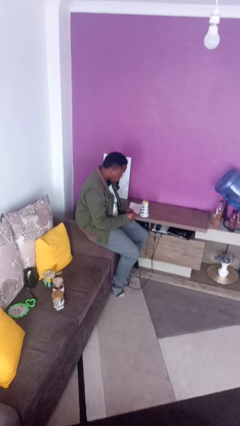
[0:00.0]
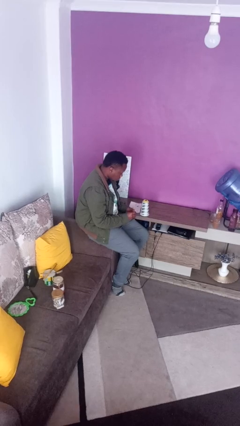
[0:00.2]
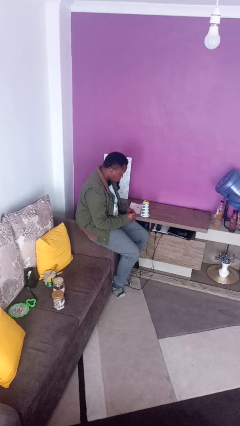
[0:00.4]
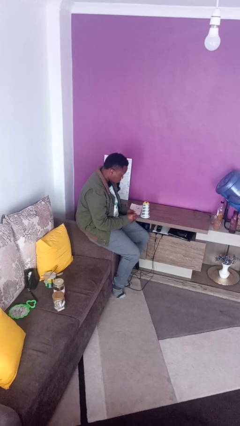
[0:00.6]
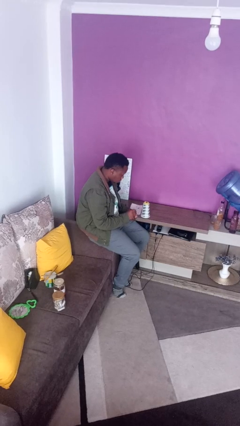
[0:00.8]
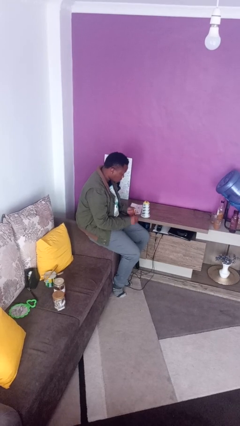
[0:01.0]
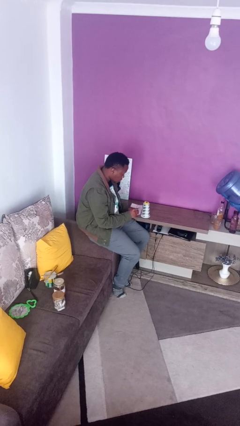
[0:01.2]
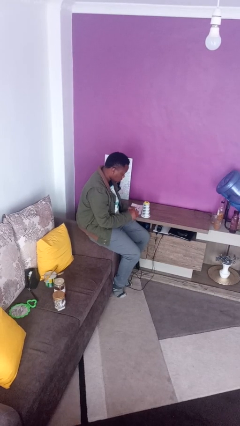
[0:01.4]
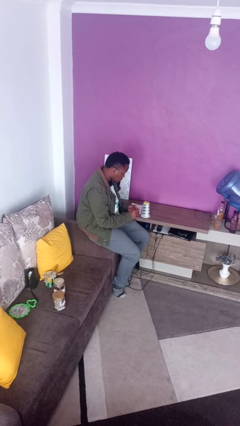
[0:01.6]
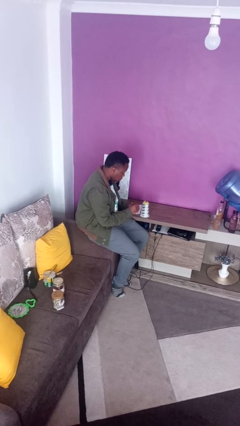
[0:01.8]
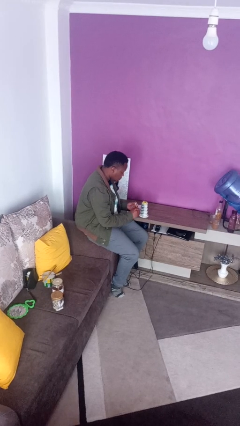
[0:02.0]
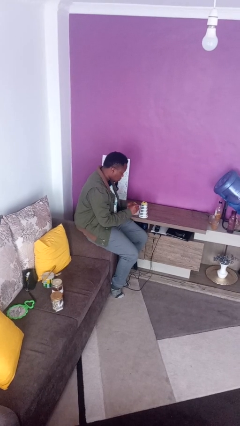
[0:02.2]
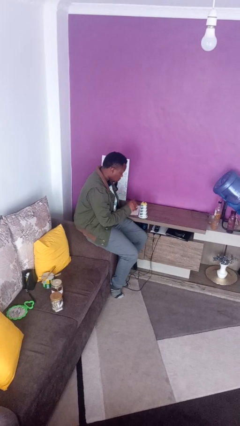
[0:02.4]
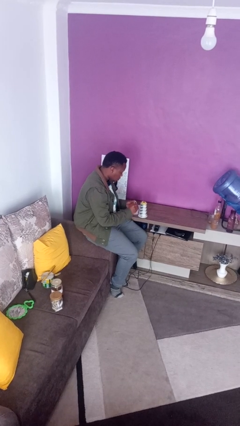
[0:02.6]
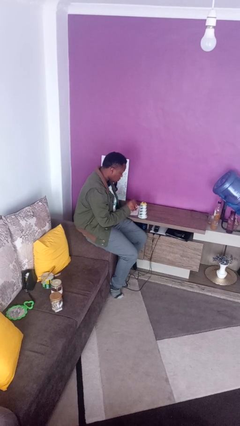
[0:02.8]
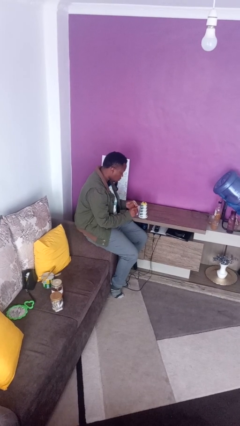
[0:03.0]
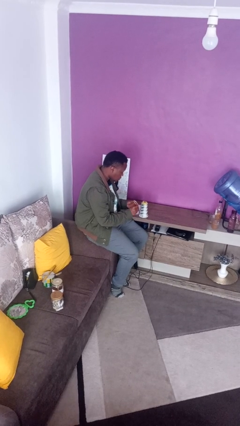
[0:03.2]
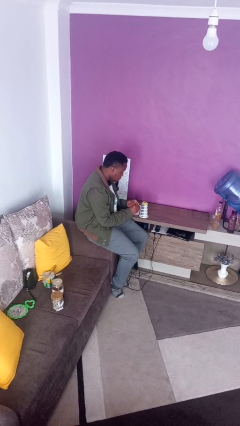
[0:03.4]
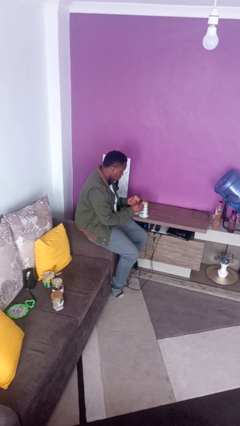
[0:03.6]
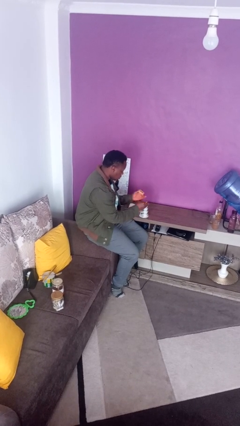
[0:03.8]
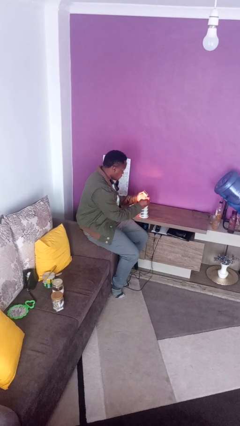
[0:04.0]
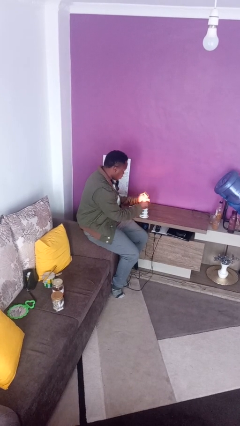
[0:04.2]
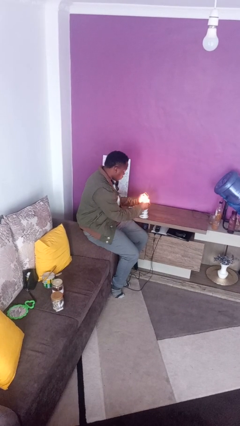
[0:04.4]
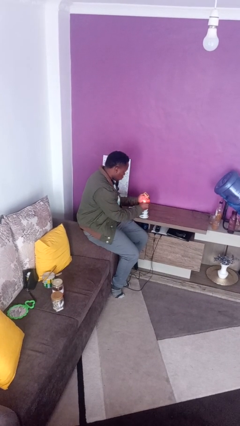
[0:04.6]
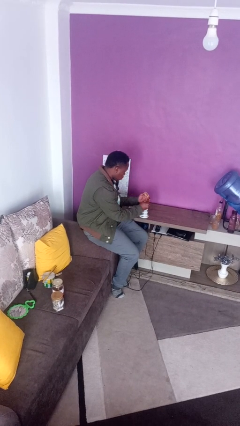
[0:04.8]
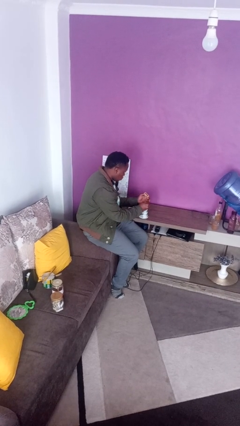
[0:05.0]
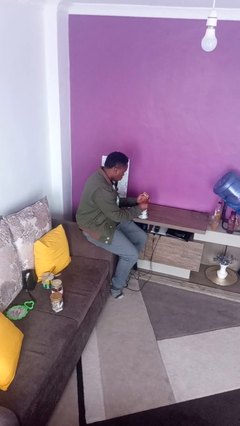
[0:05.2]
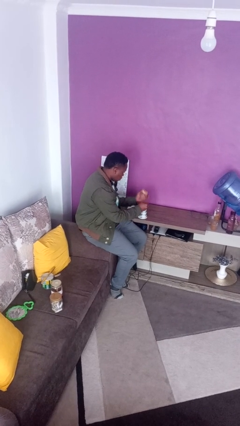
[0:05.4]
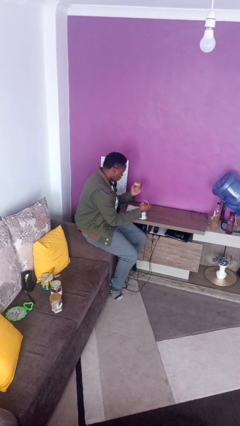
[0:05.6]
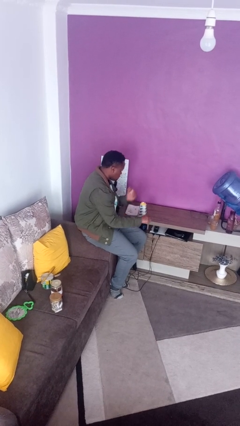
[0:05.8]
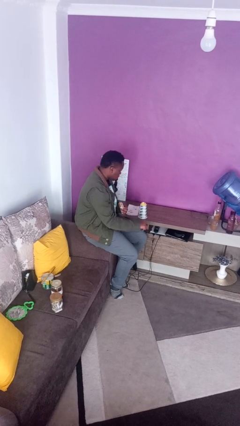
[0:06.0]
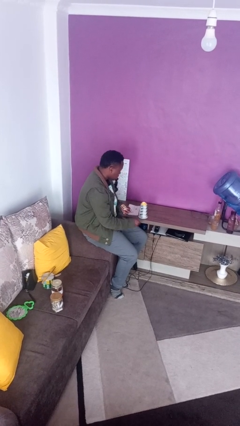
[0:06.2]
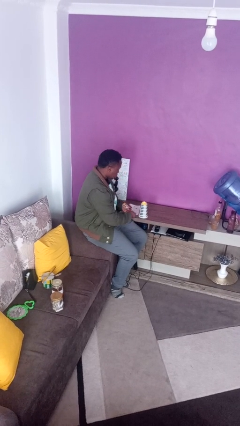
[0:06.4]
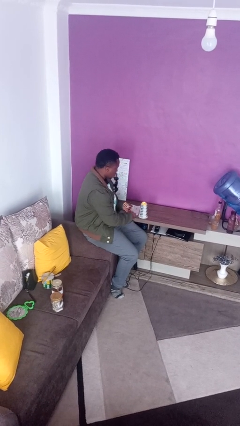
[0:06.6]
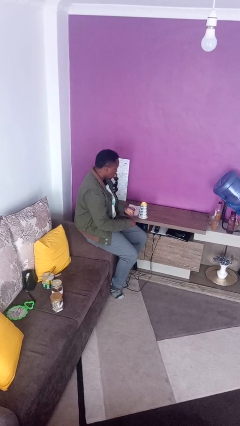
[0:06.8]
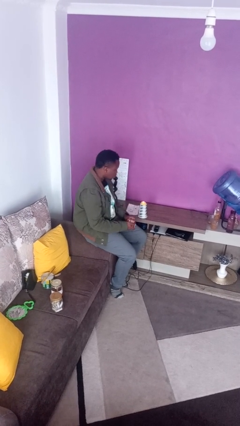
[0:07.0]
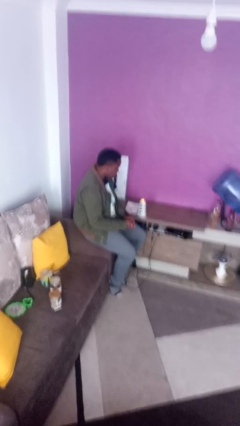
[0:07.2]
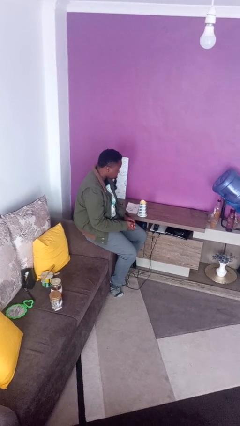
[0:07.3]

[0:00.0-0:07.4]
person lights candle

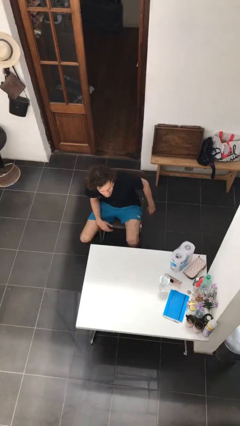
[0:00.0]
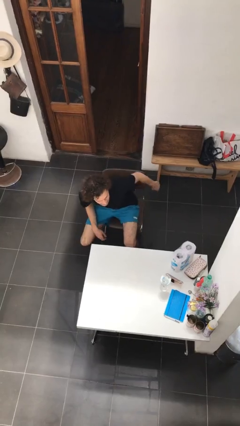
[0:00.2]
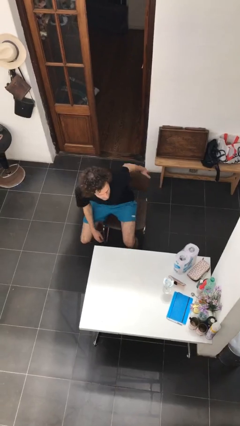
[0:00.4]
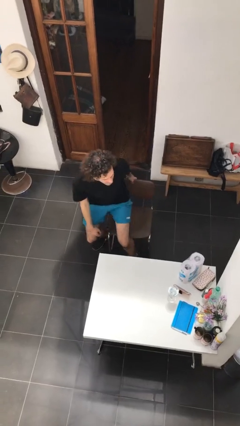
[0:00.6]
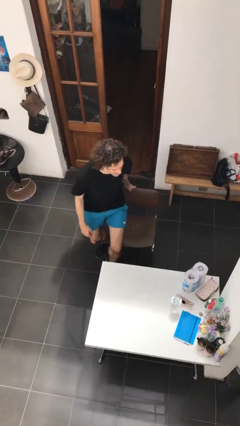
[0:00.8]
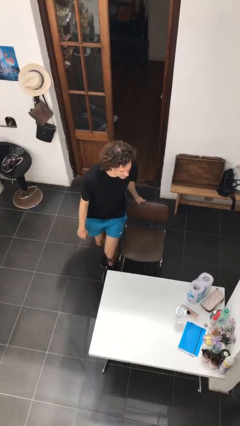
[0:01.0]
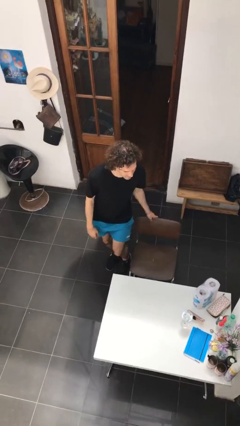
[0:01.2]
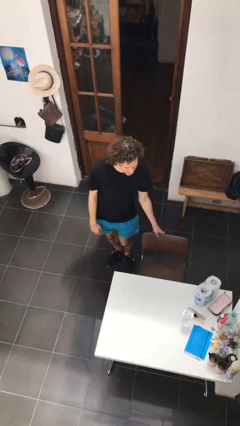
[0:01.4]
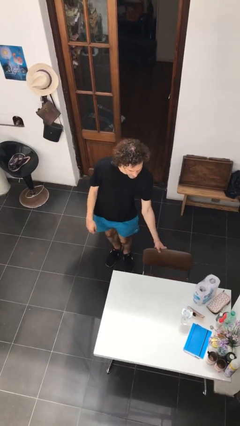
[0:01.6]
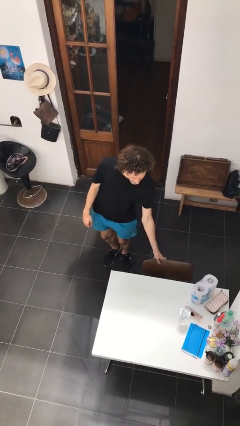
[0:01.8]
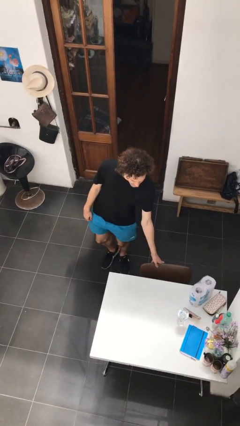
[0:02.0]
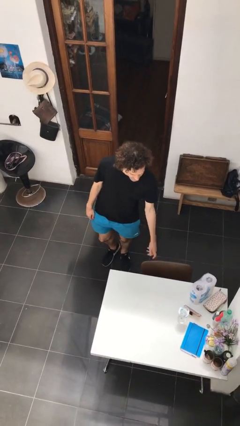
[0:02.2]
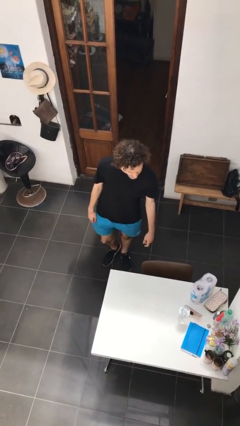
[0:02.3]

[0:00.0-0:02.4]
person stands up

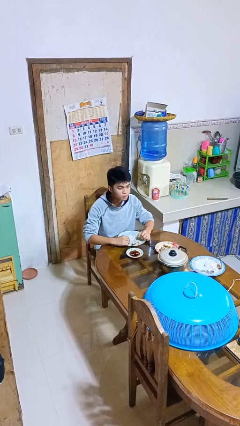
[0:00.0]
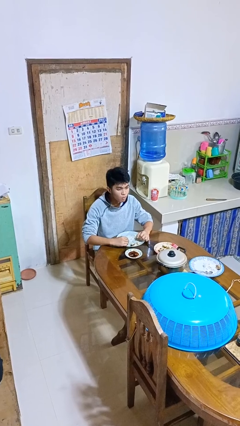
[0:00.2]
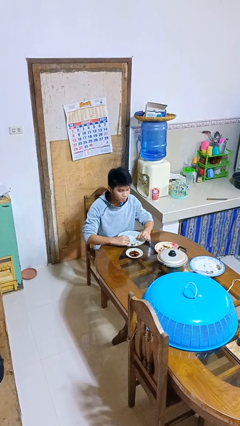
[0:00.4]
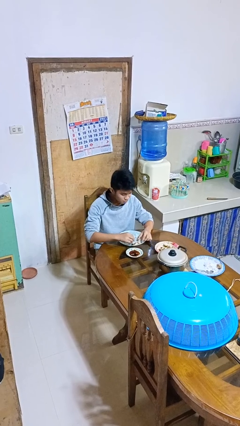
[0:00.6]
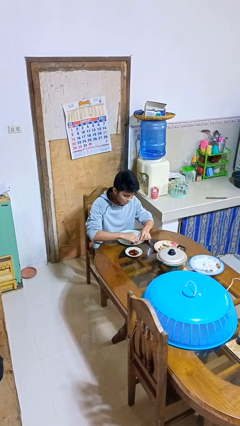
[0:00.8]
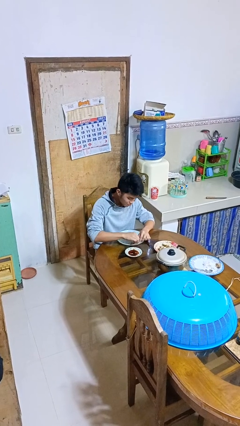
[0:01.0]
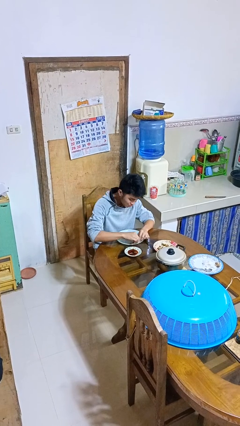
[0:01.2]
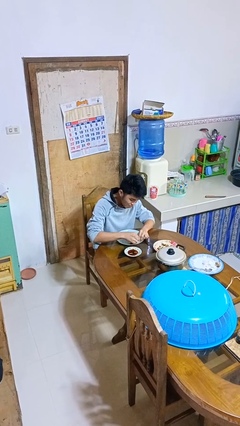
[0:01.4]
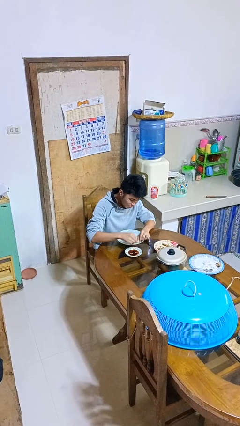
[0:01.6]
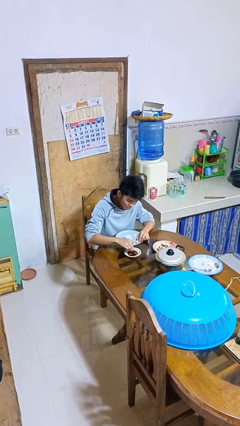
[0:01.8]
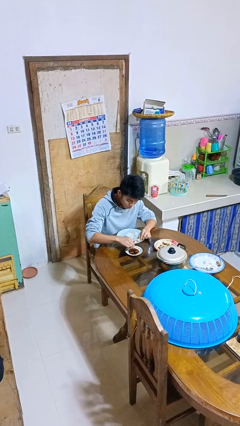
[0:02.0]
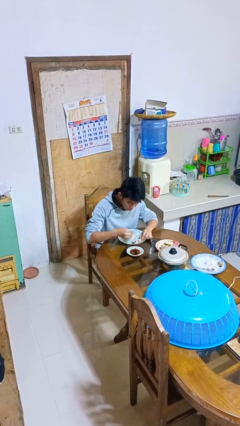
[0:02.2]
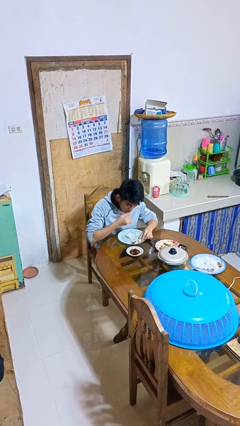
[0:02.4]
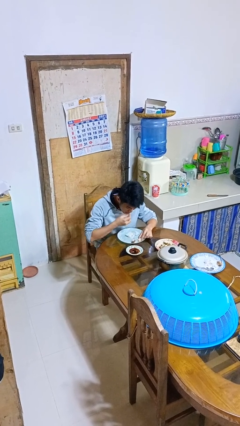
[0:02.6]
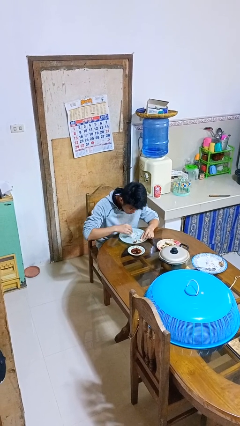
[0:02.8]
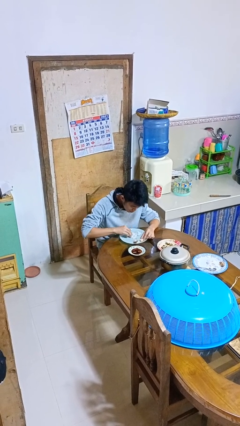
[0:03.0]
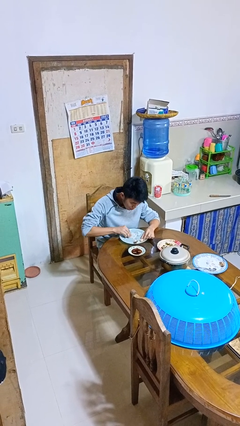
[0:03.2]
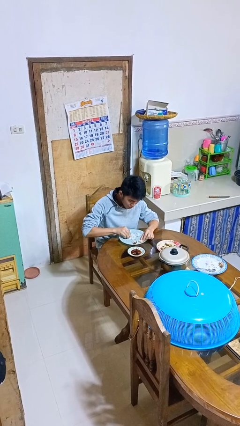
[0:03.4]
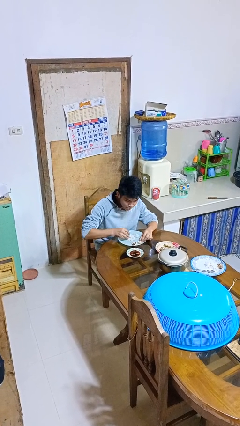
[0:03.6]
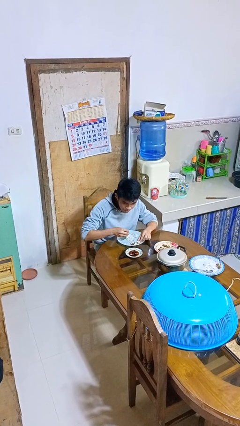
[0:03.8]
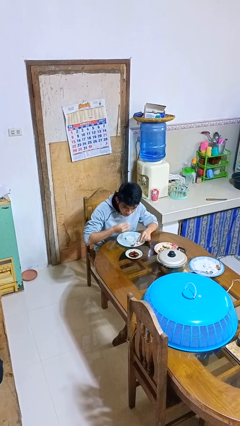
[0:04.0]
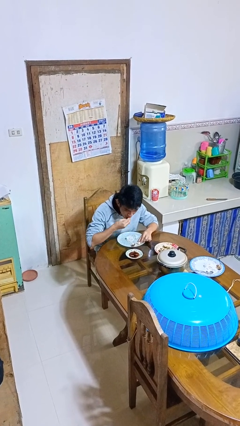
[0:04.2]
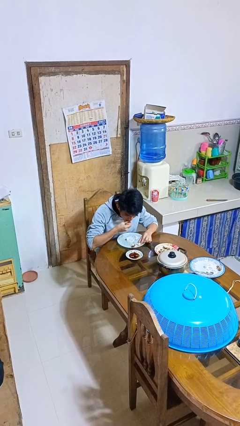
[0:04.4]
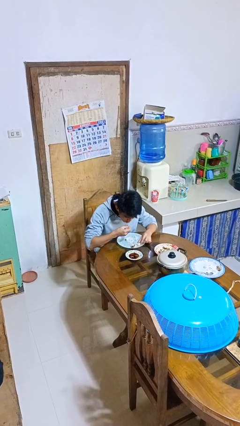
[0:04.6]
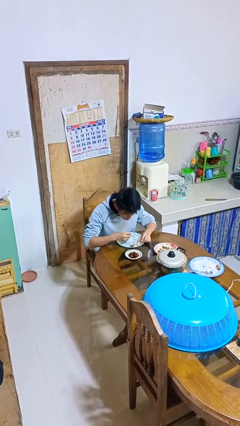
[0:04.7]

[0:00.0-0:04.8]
person eats with hands

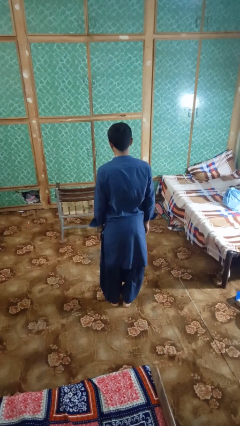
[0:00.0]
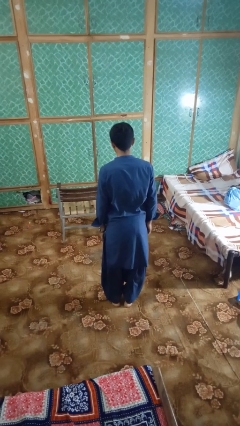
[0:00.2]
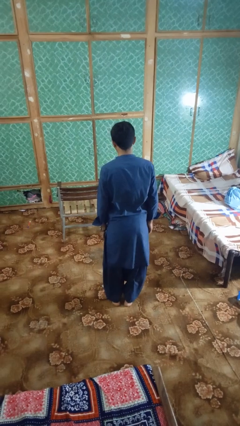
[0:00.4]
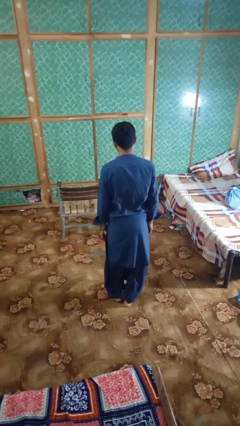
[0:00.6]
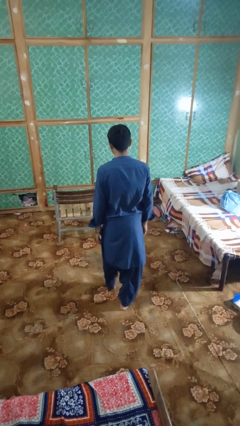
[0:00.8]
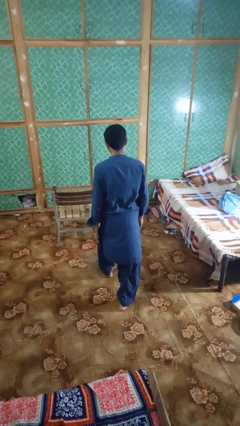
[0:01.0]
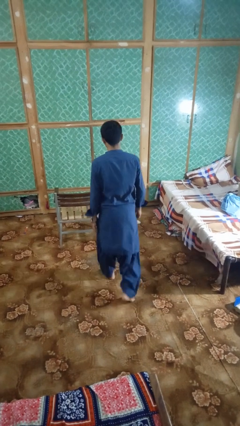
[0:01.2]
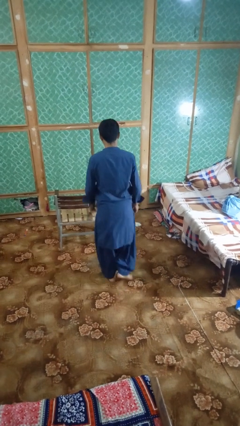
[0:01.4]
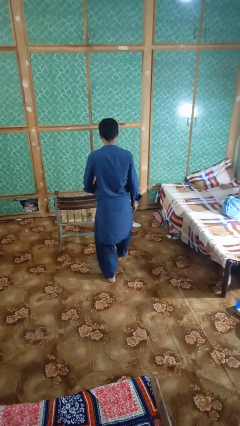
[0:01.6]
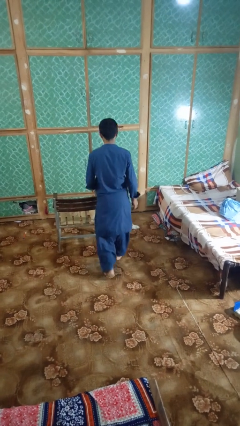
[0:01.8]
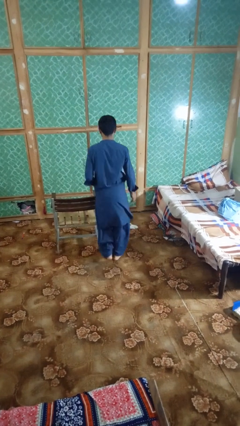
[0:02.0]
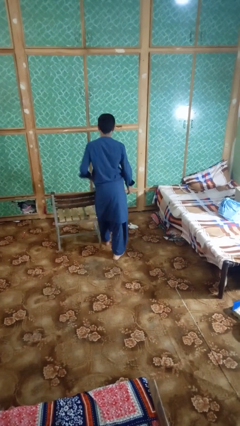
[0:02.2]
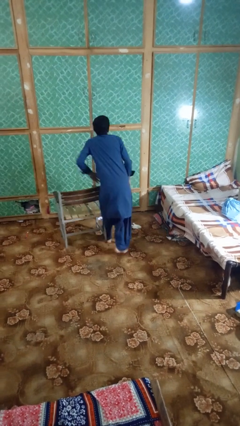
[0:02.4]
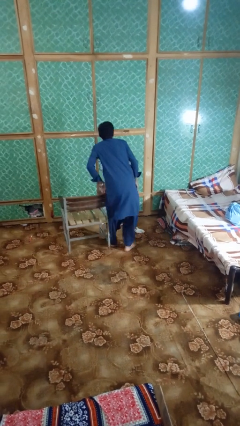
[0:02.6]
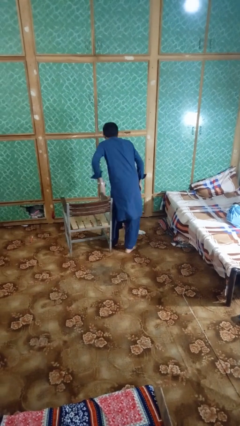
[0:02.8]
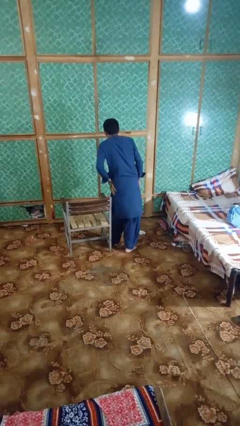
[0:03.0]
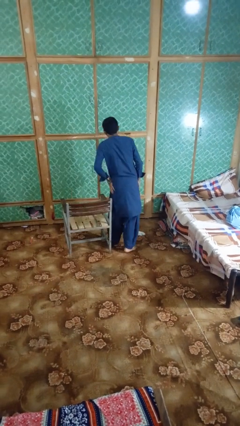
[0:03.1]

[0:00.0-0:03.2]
person bumps into table
